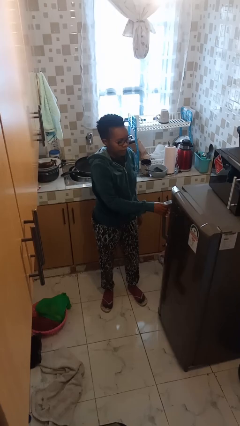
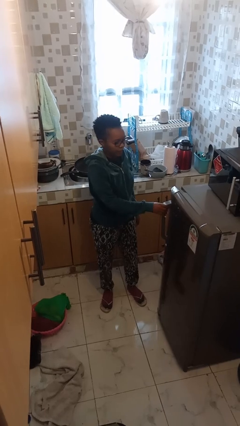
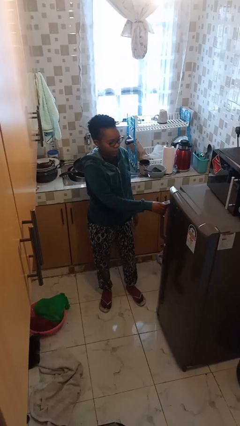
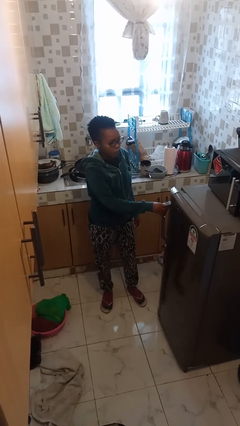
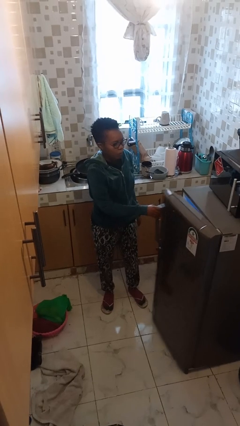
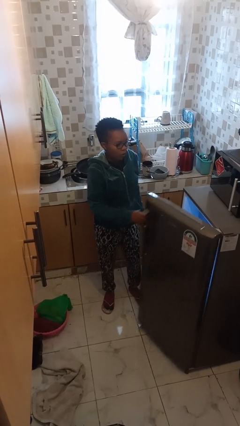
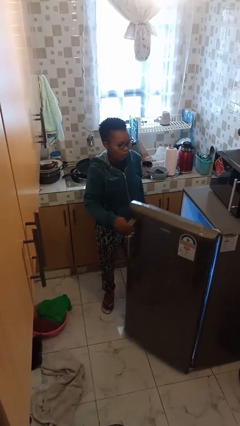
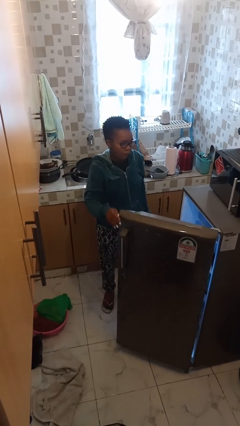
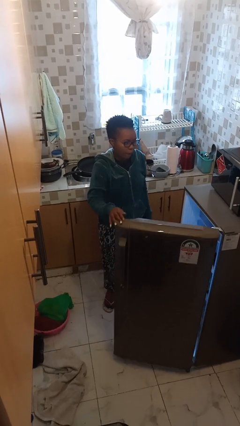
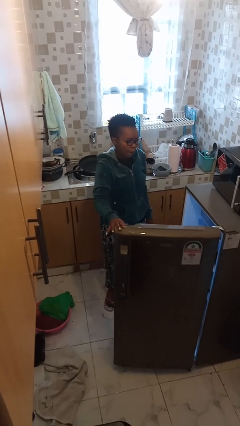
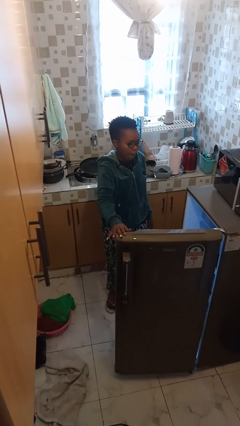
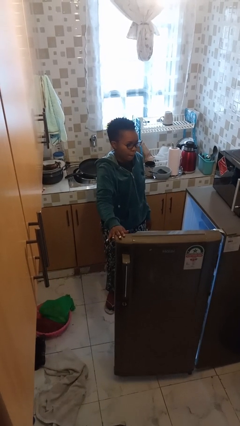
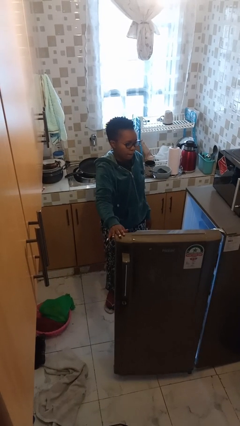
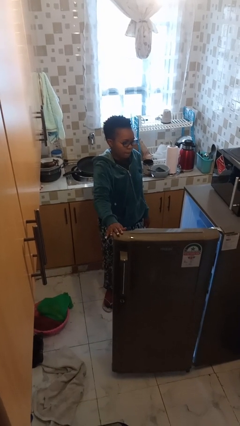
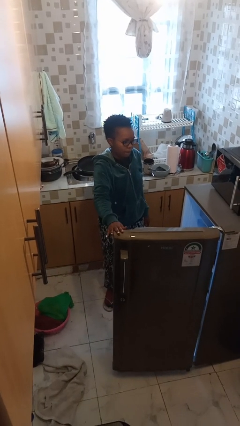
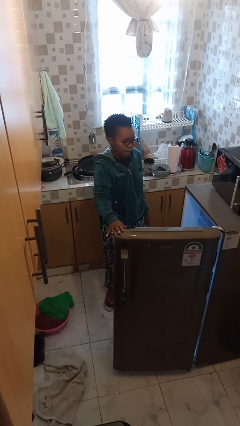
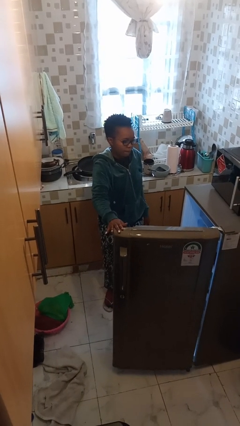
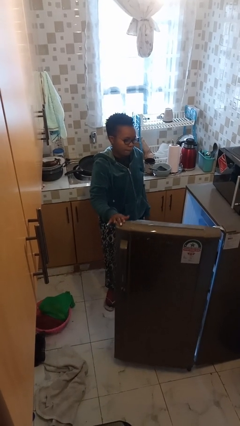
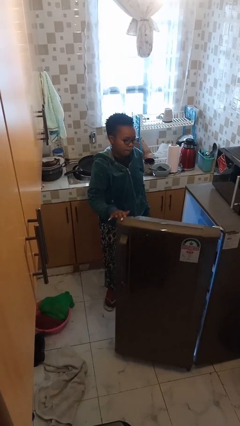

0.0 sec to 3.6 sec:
person opens refrigerator

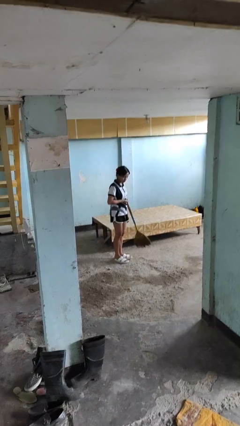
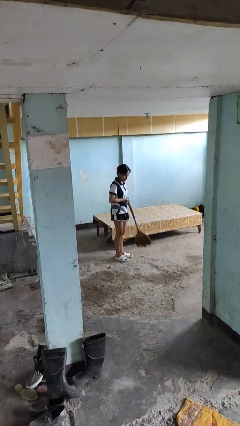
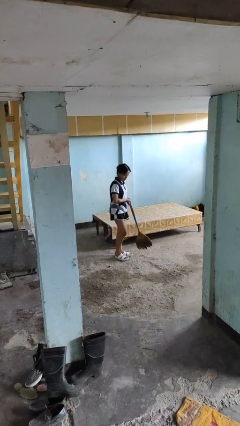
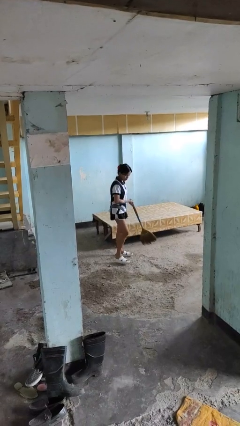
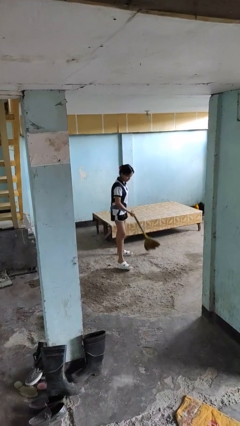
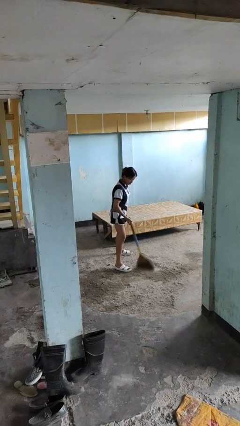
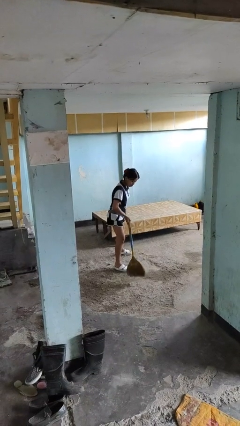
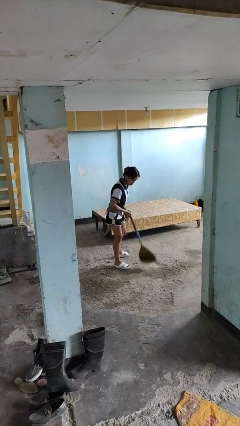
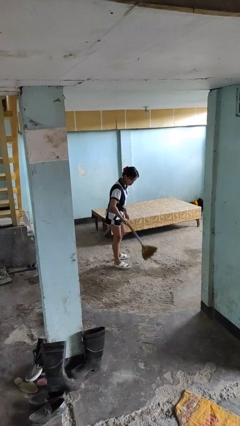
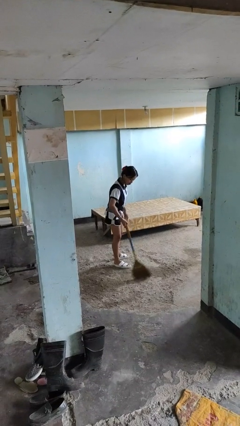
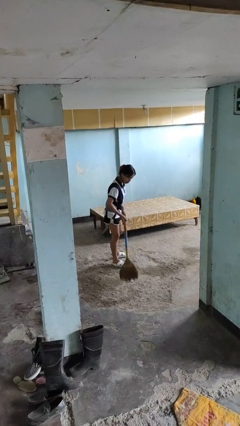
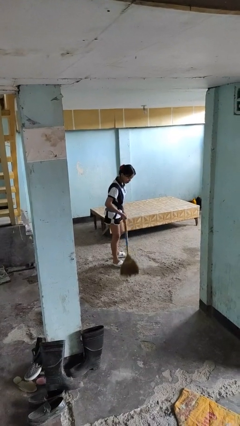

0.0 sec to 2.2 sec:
person sweeps floor

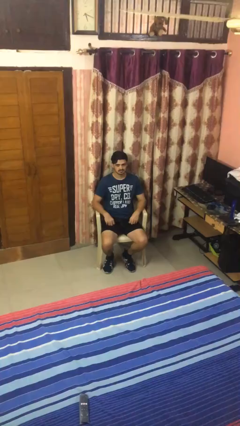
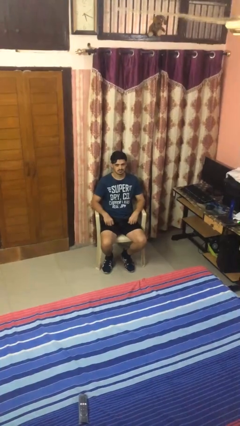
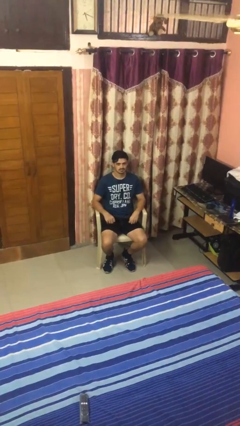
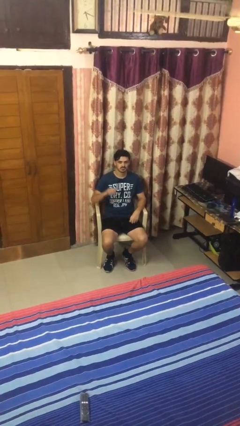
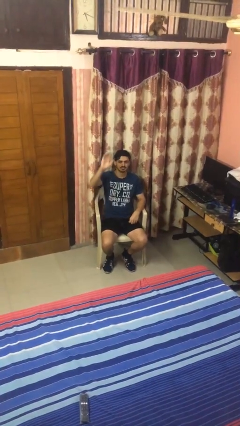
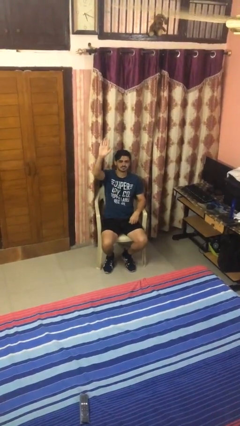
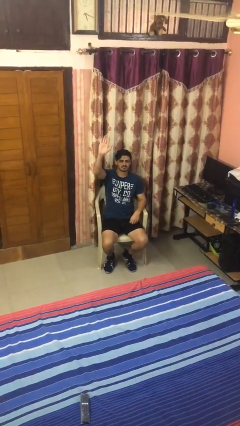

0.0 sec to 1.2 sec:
person gestures raise hand

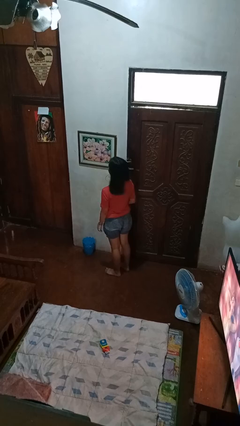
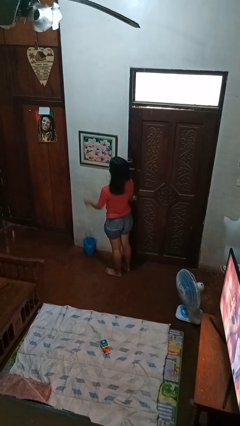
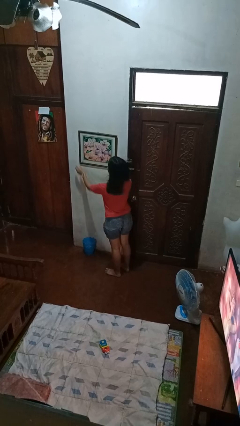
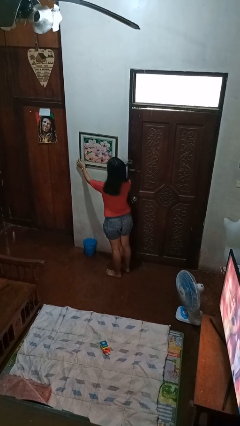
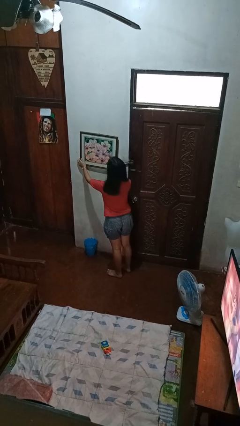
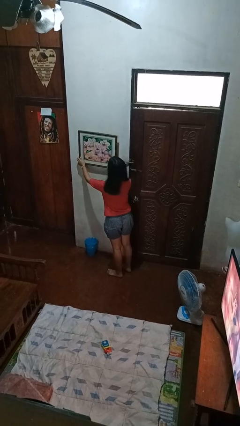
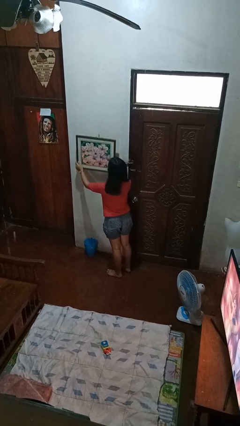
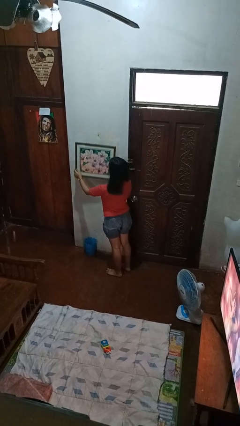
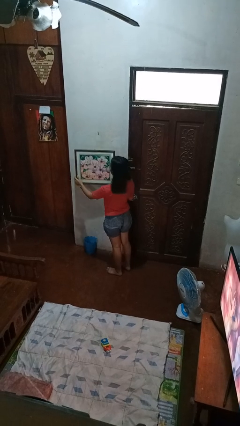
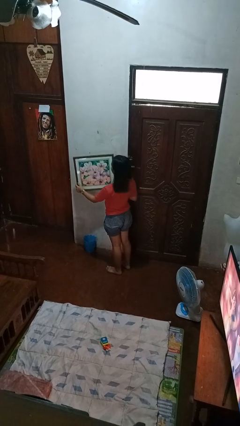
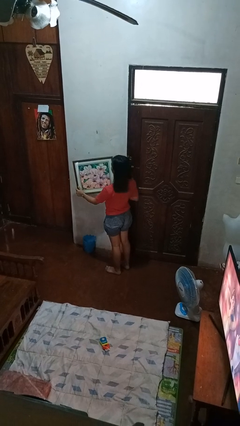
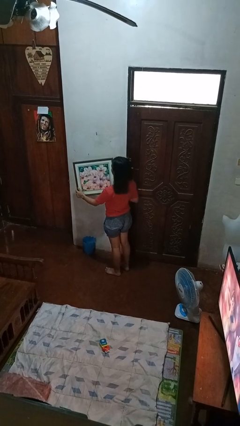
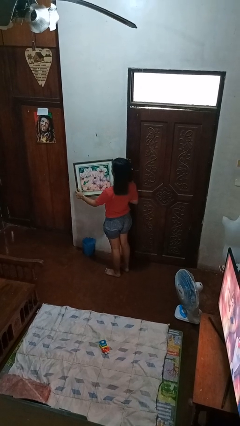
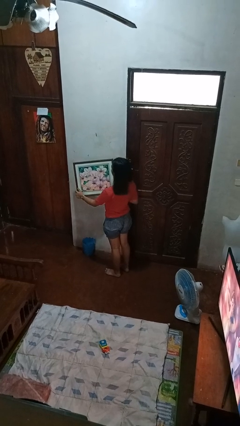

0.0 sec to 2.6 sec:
person takes down picture frame

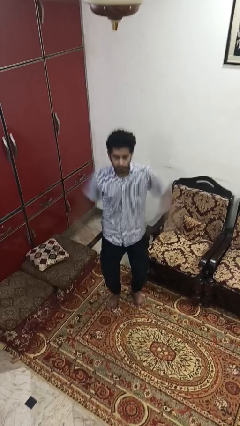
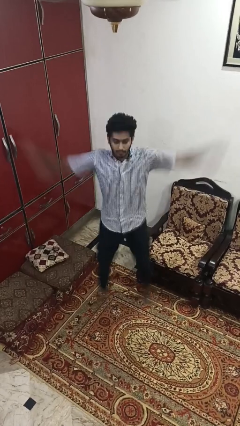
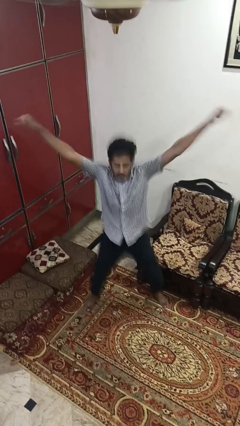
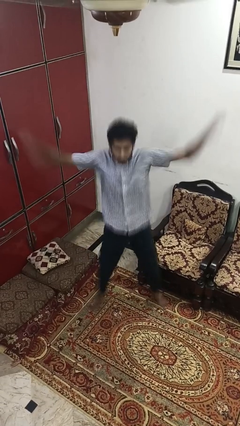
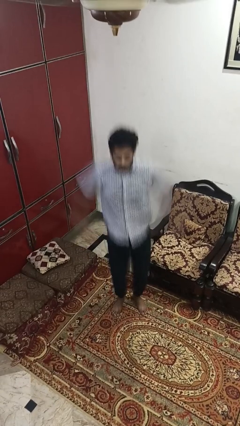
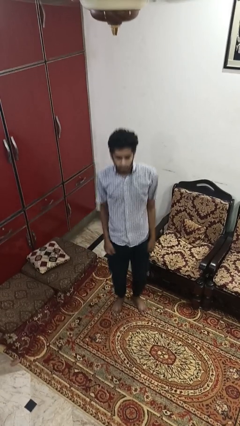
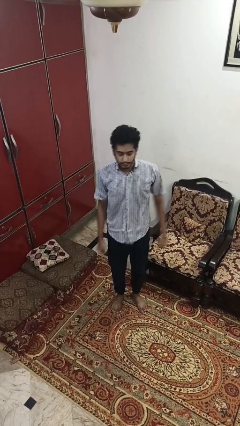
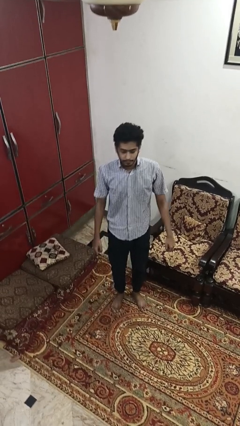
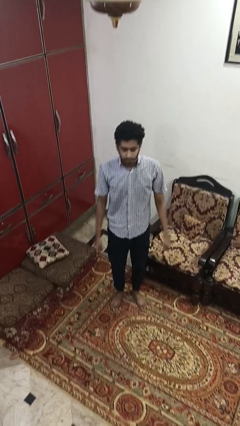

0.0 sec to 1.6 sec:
person exercises with jumping jacks

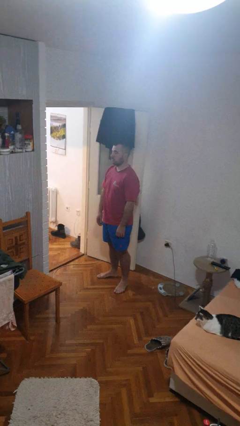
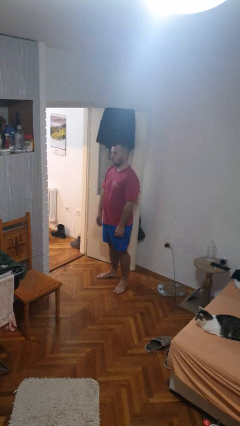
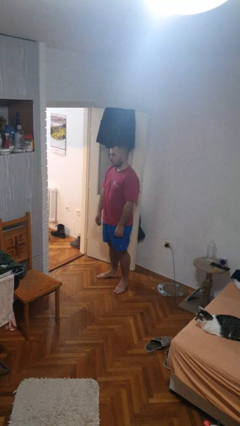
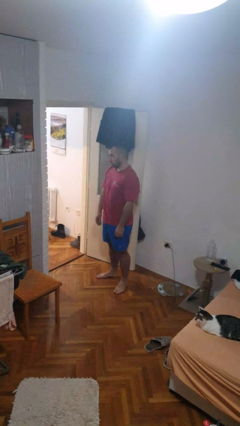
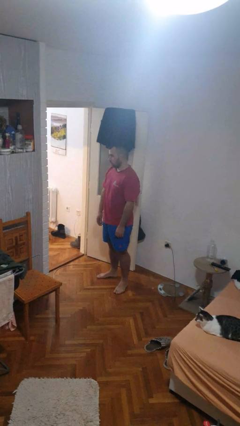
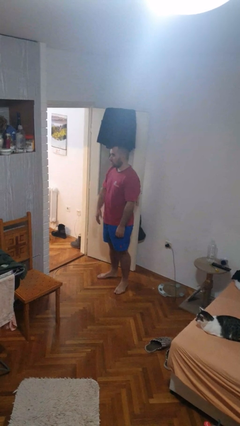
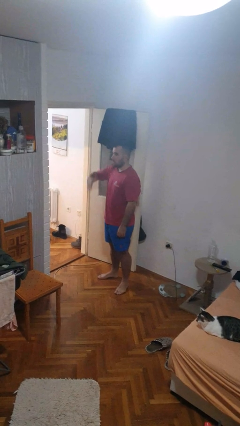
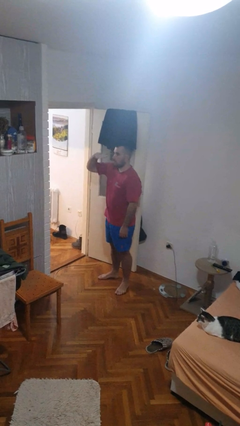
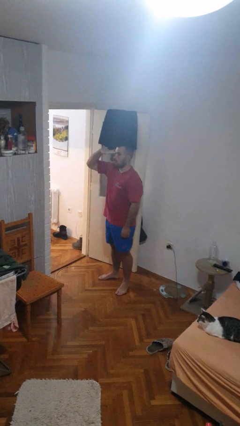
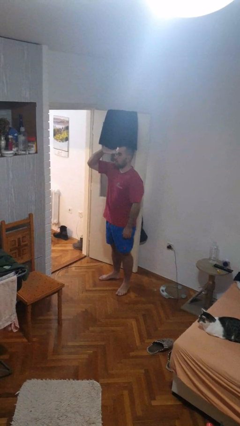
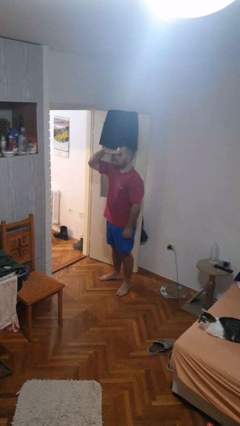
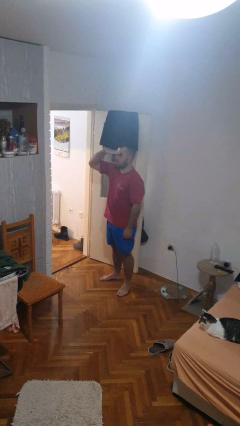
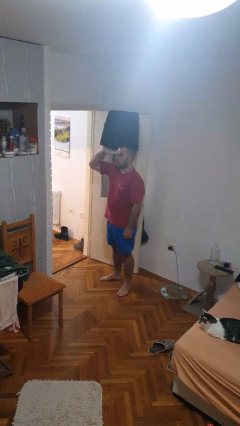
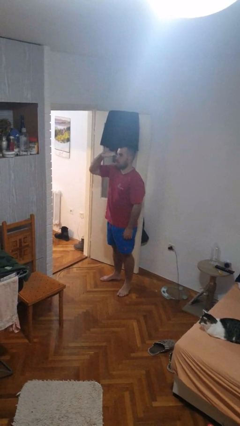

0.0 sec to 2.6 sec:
person shades eyes

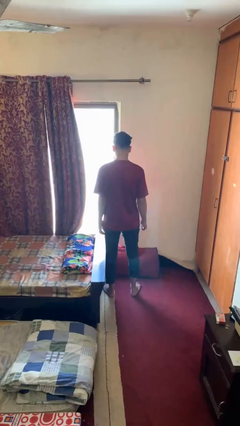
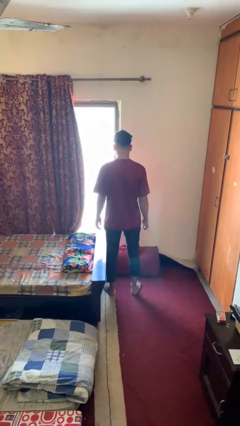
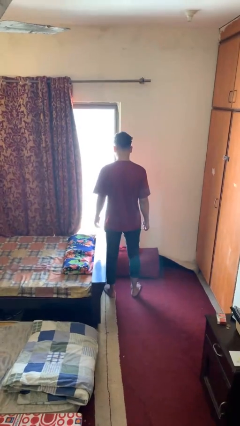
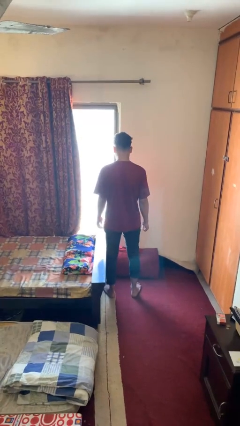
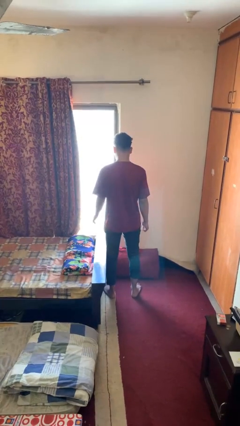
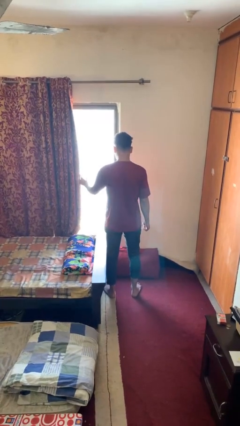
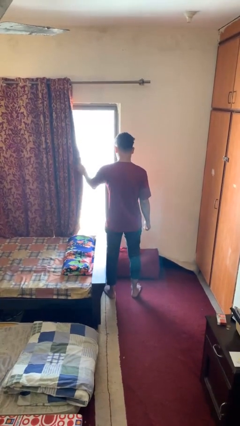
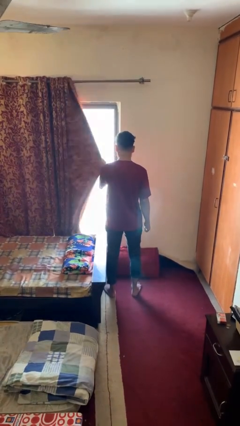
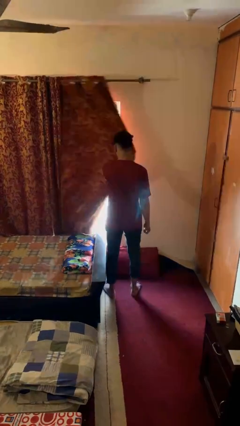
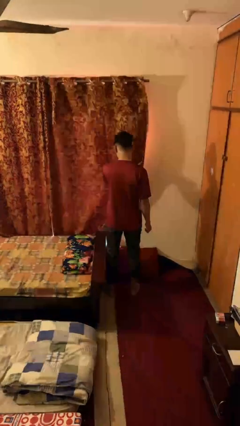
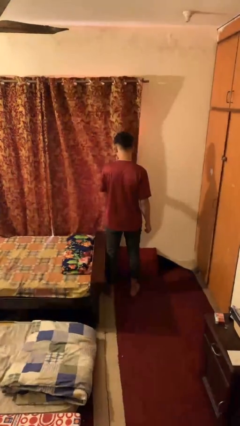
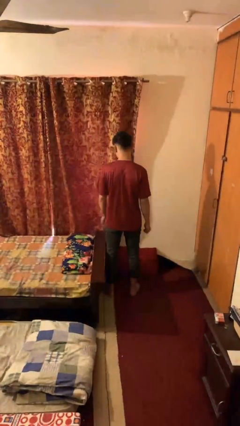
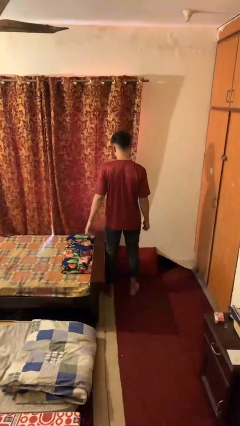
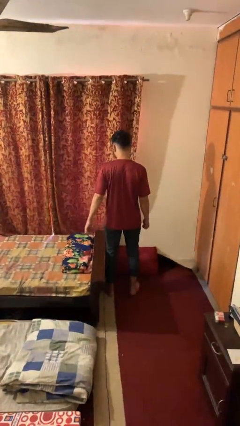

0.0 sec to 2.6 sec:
person closes curtains

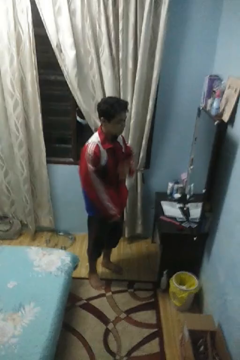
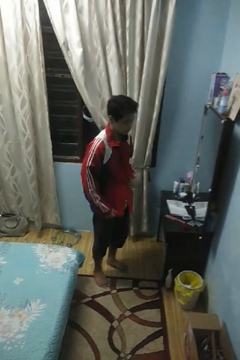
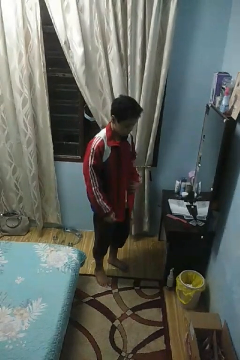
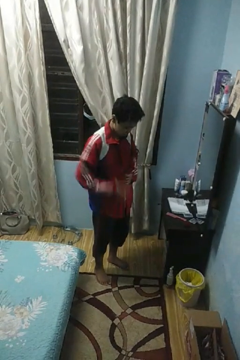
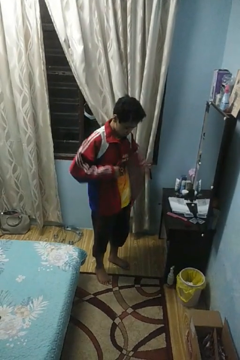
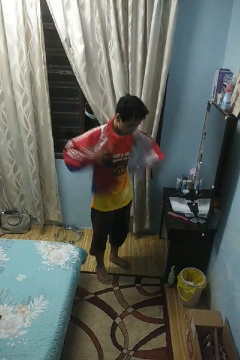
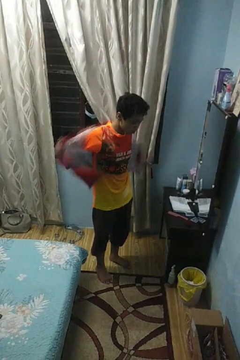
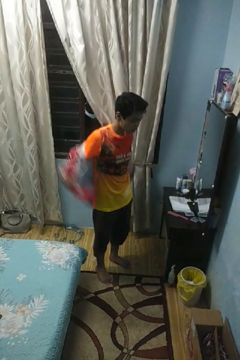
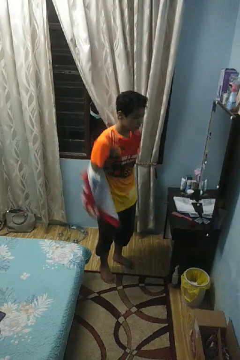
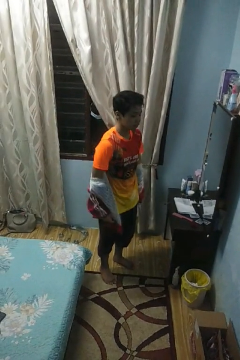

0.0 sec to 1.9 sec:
person takes off jacket
